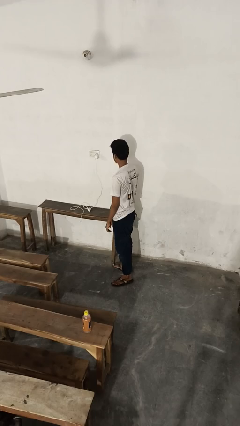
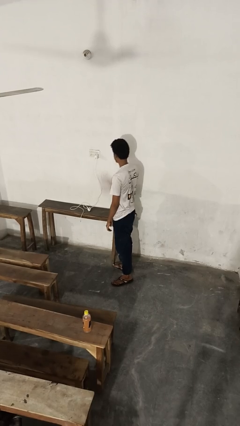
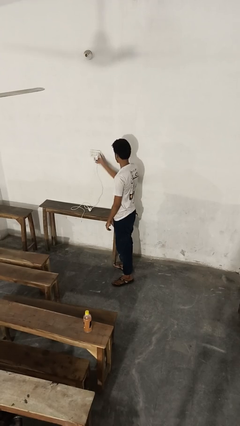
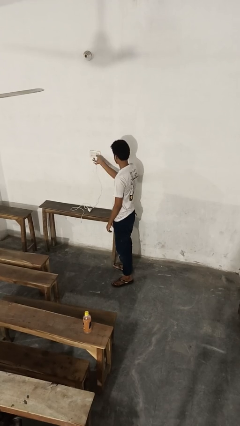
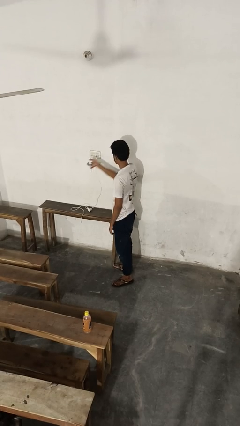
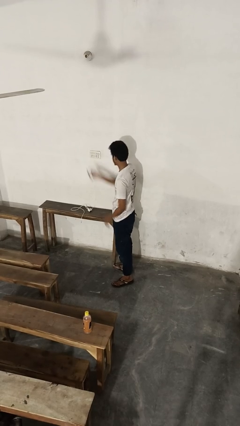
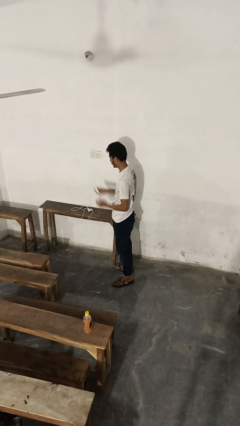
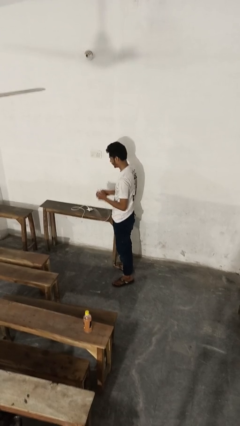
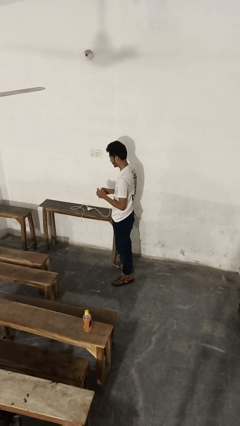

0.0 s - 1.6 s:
person unplugs from electrical socket

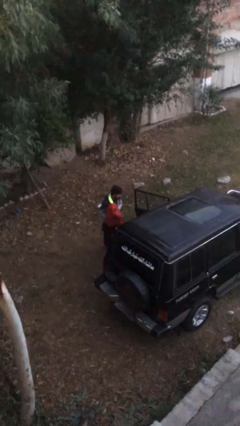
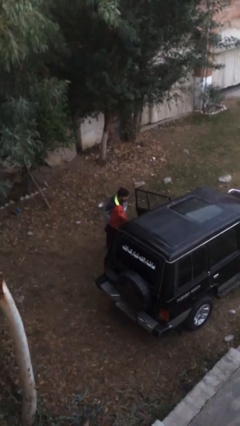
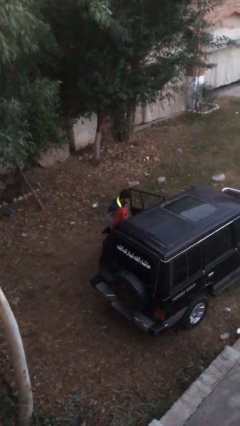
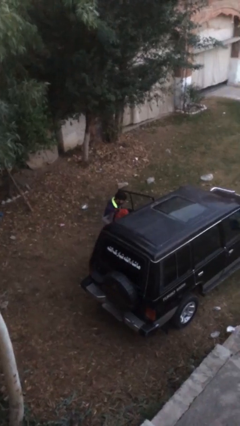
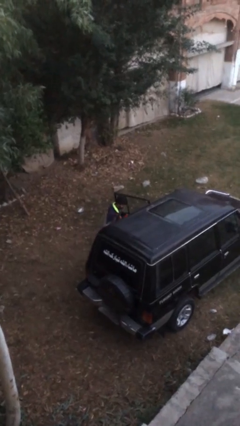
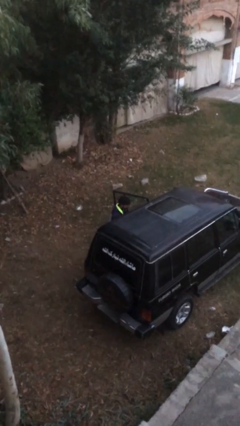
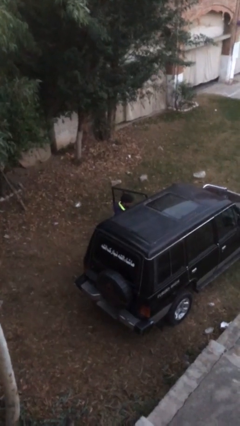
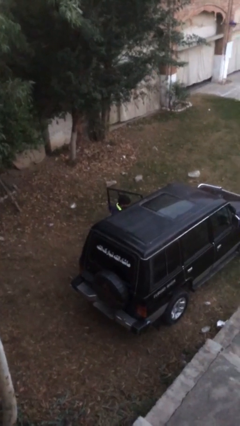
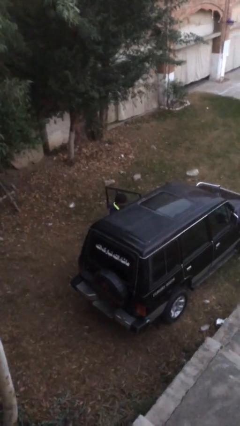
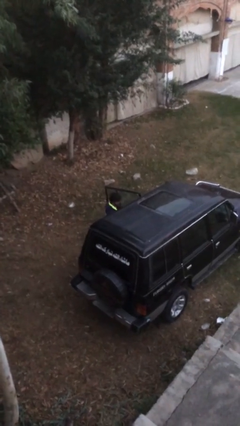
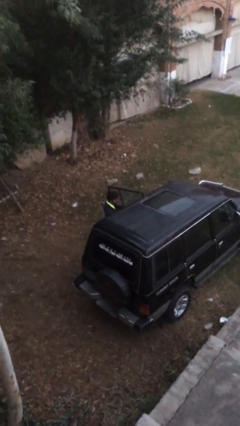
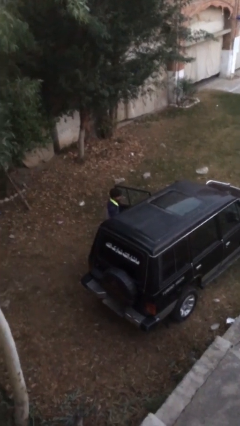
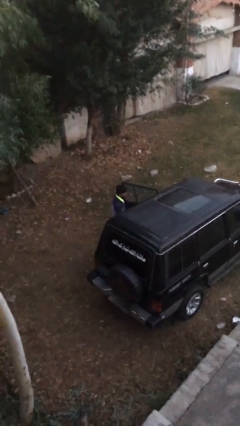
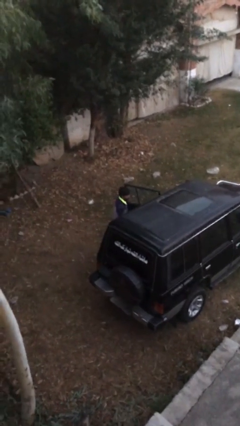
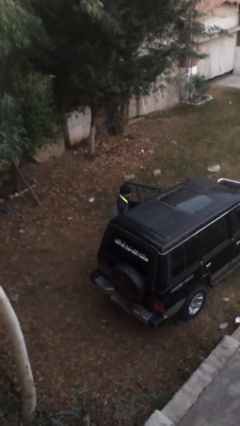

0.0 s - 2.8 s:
person loads car

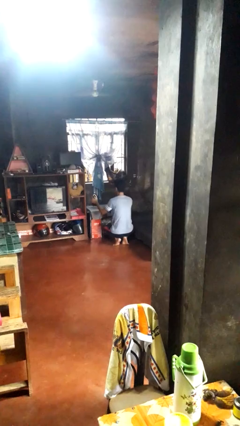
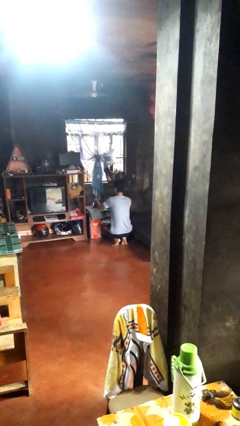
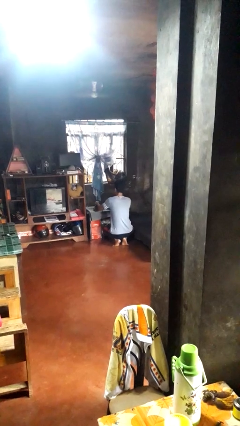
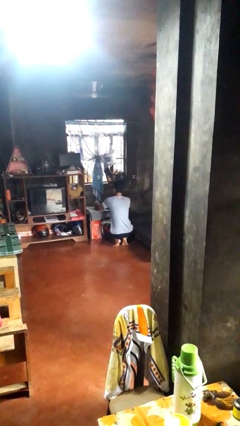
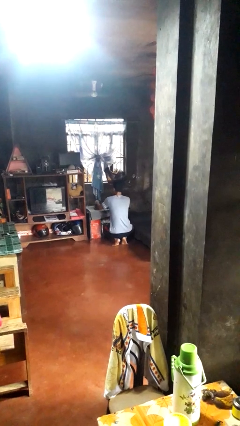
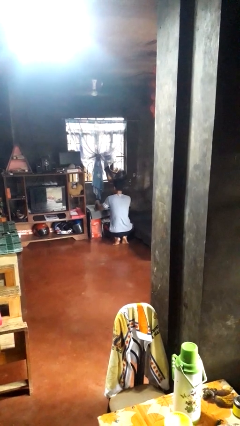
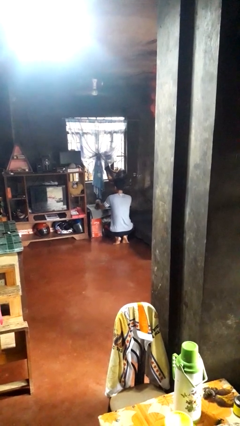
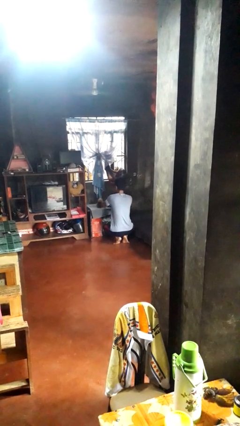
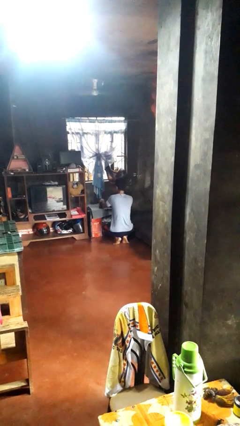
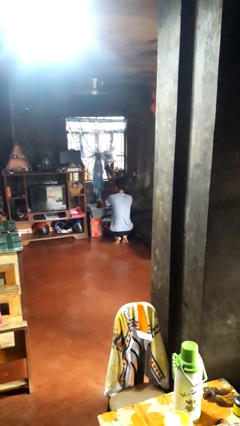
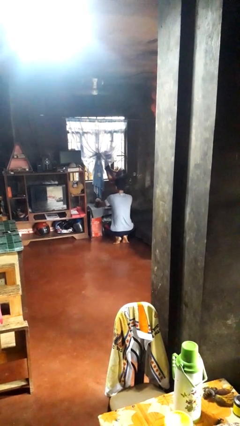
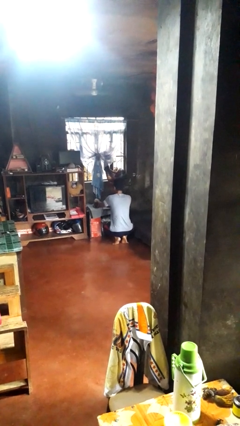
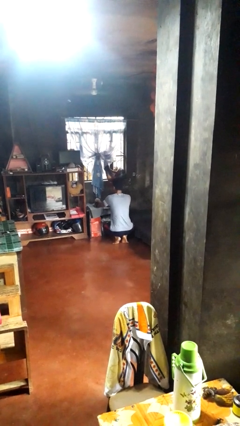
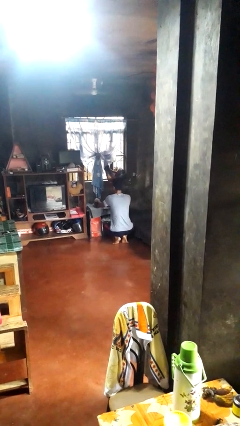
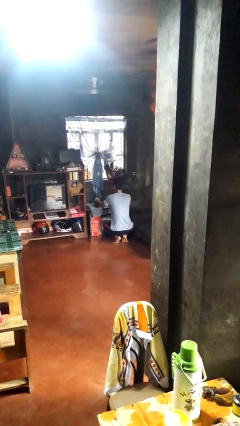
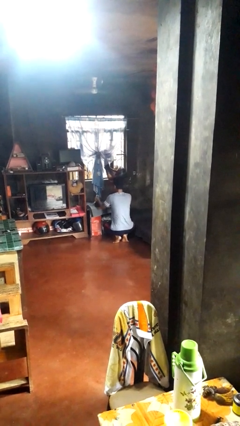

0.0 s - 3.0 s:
person irons clothes

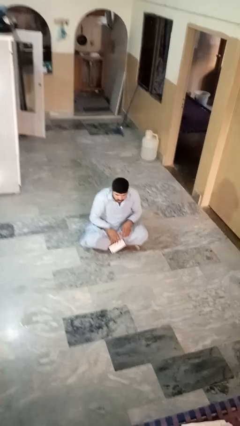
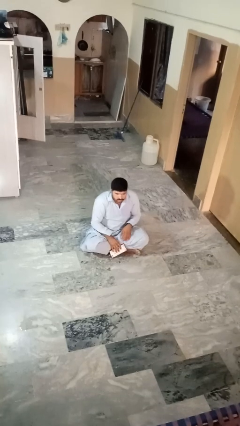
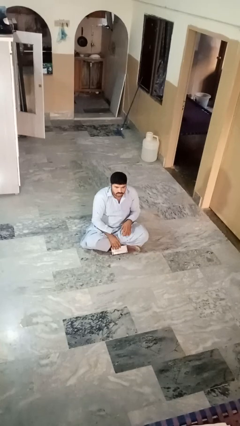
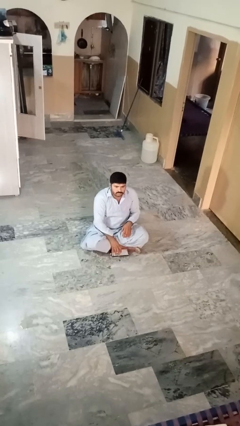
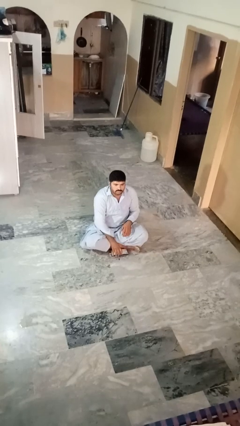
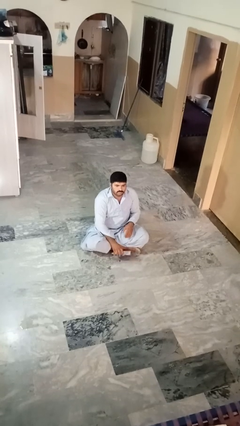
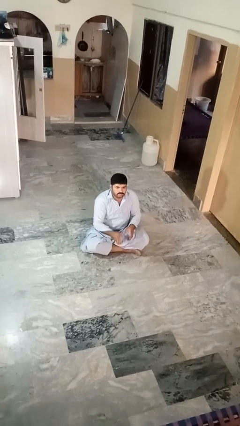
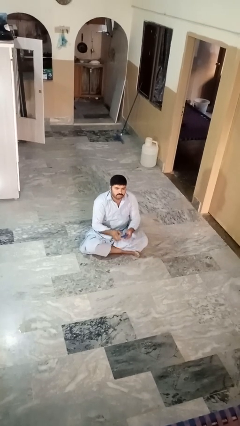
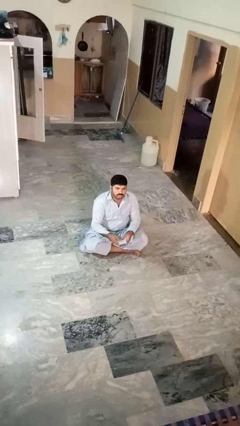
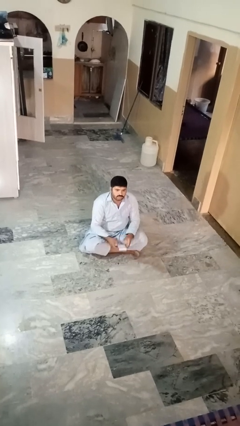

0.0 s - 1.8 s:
person picks up object from floor

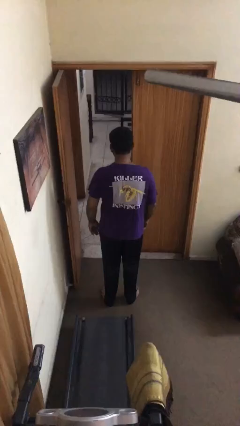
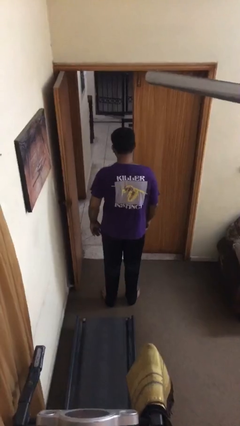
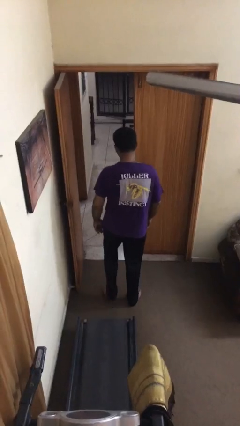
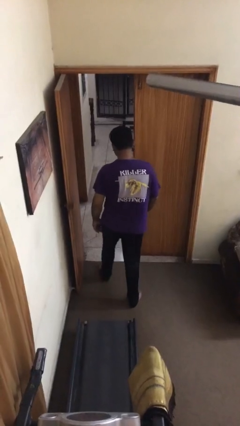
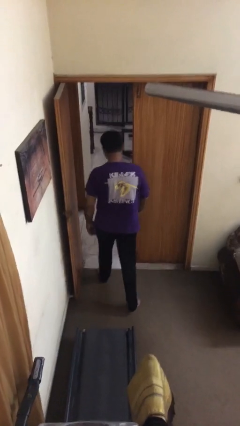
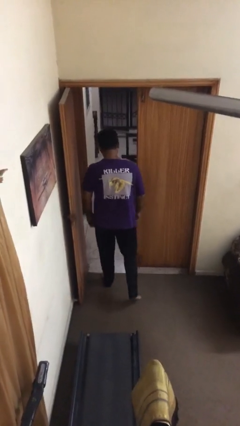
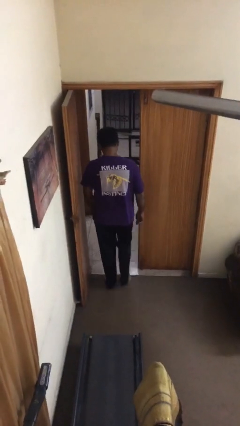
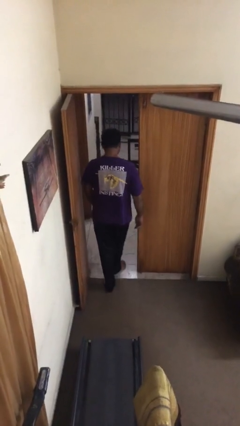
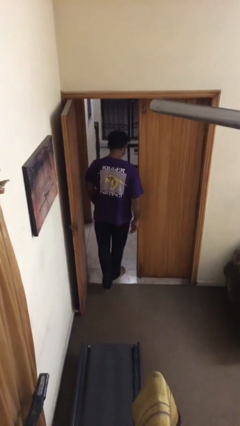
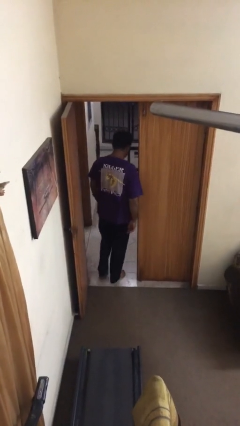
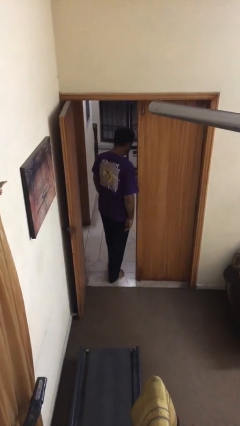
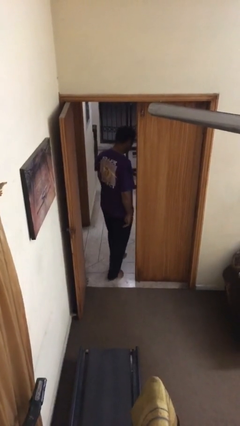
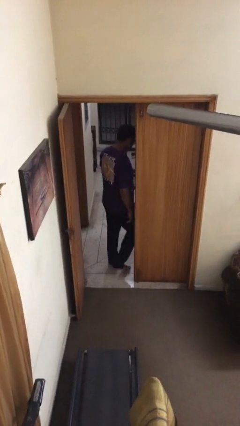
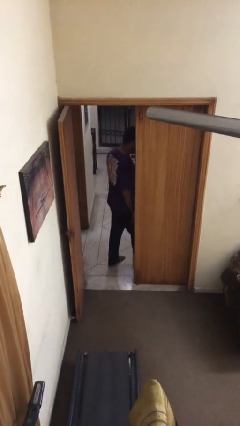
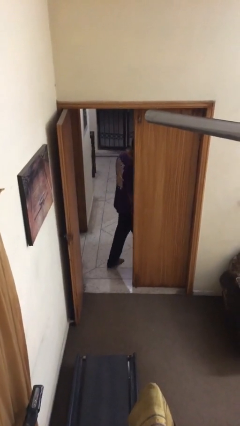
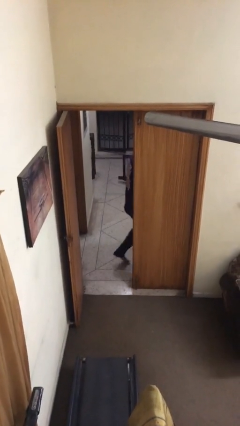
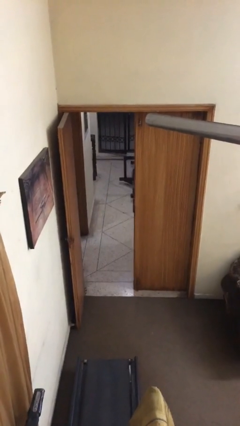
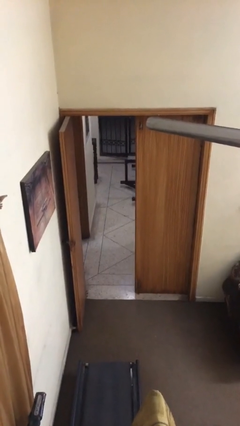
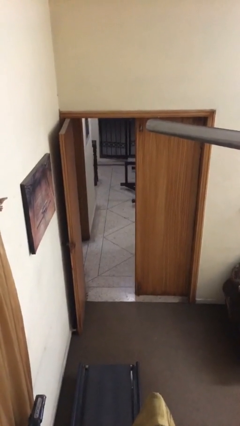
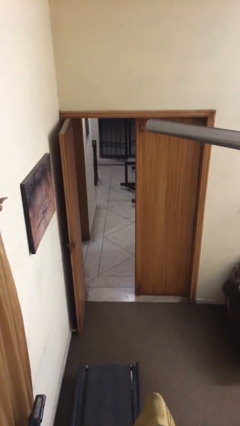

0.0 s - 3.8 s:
person exits scene through structure

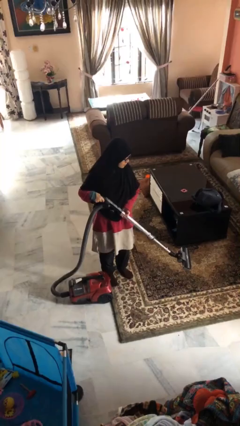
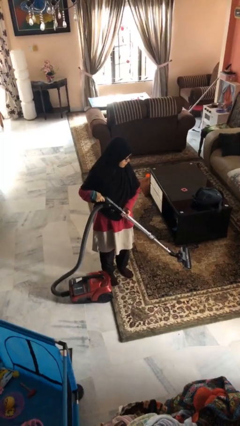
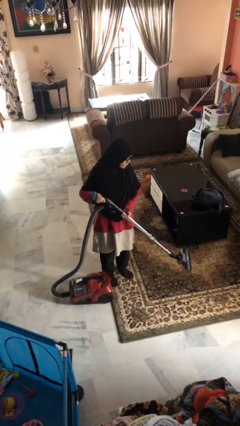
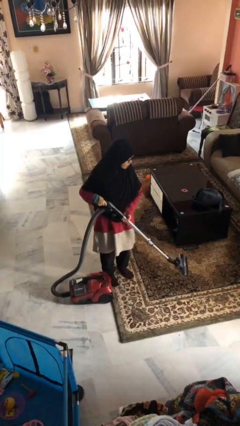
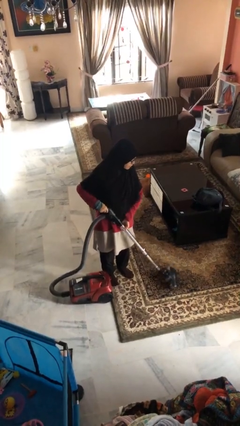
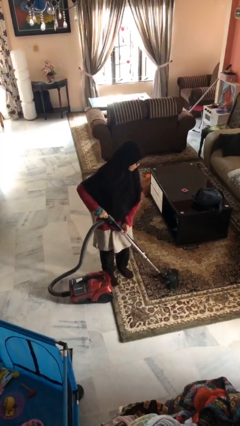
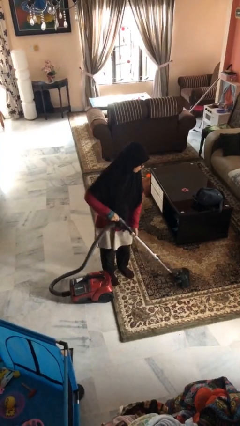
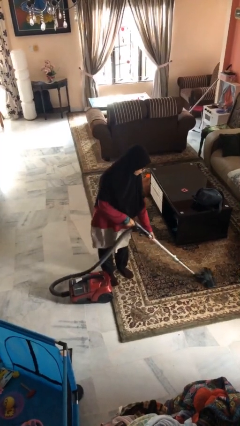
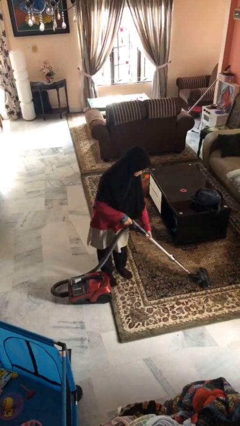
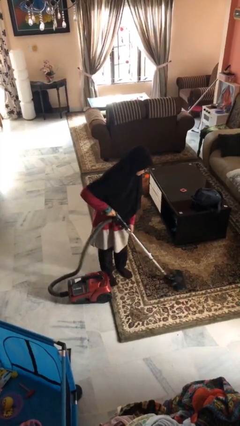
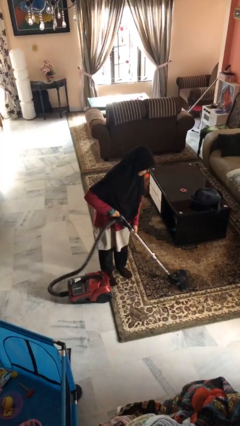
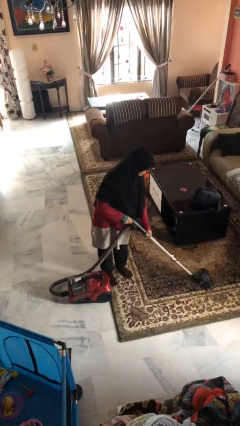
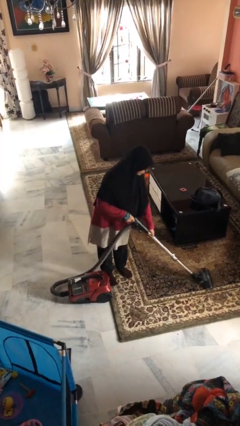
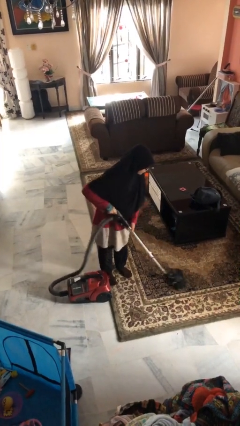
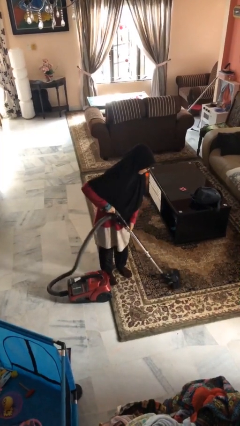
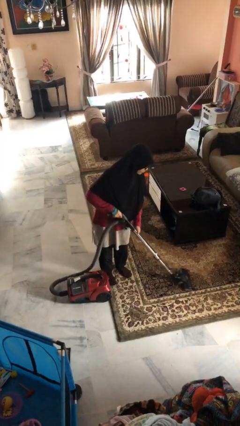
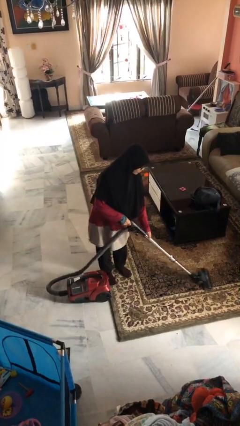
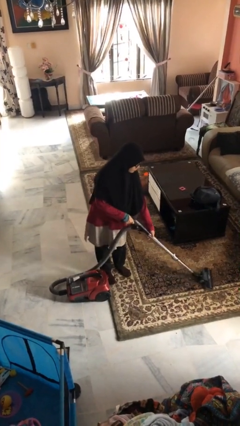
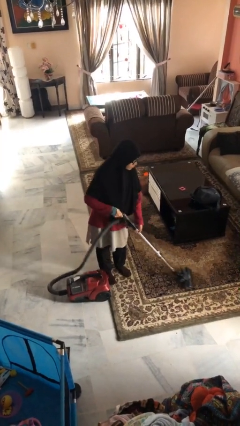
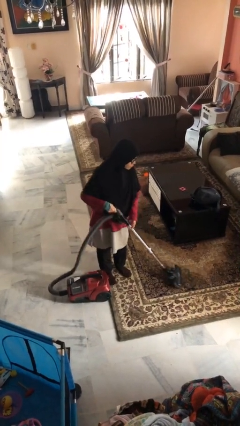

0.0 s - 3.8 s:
person vacuums carpet

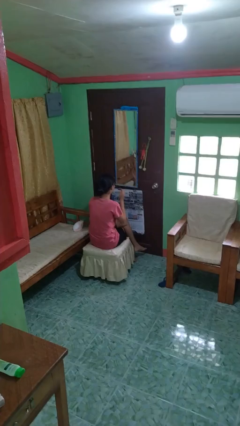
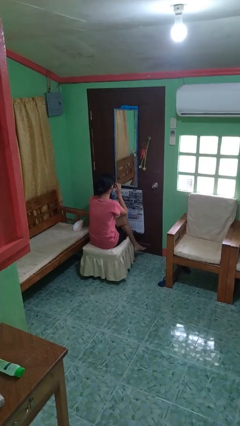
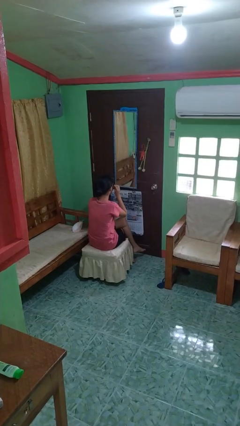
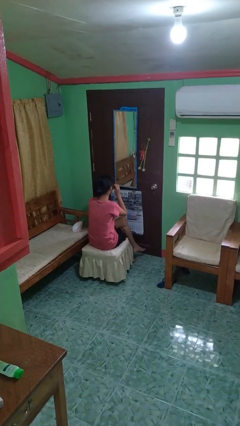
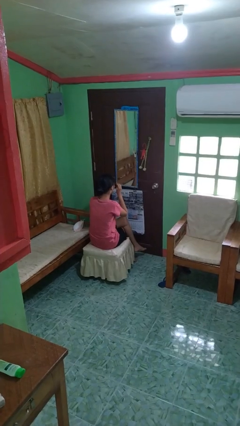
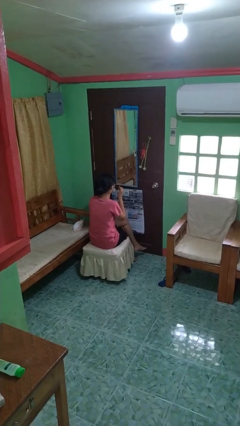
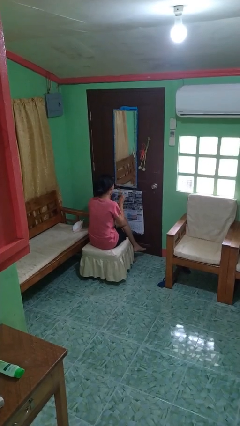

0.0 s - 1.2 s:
person takes off sunglasses
